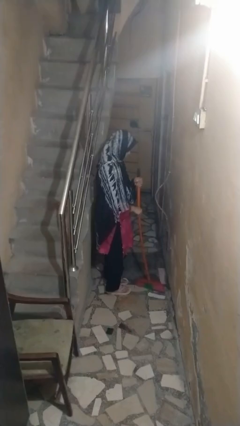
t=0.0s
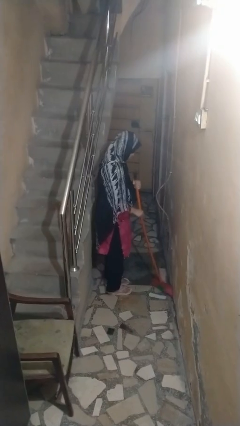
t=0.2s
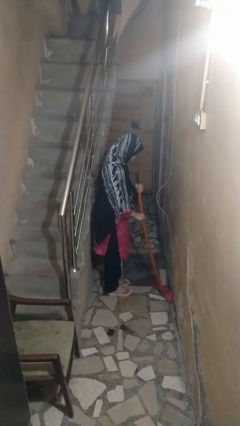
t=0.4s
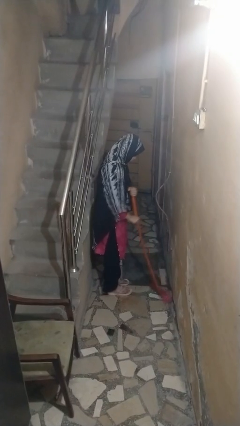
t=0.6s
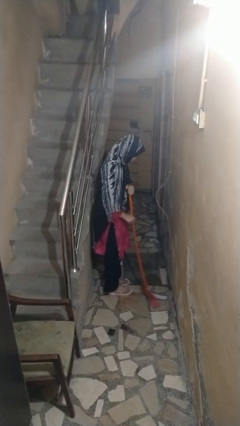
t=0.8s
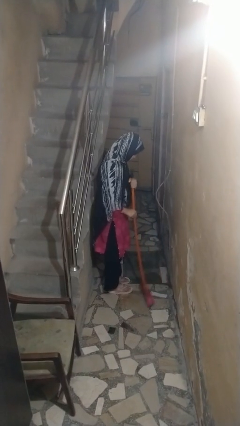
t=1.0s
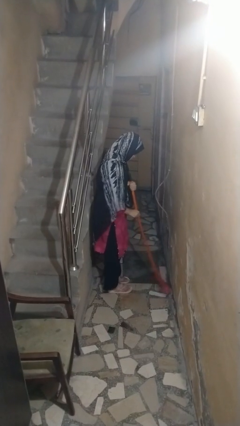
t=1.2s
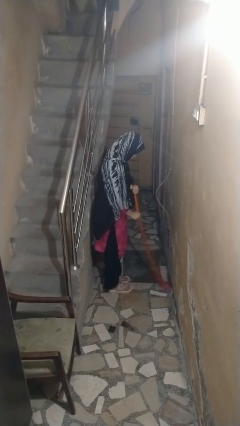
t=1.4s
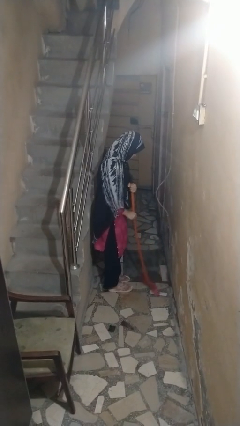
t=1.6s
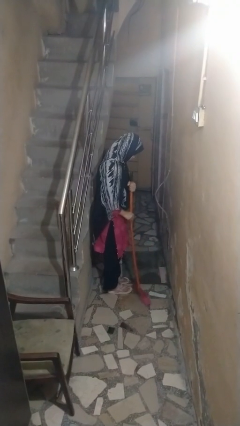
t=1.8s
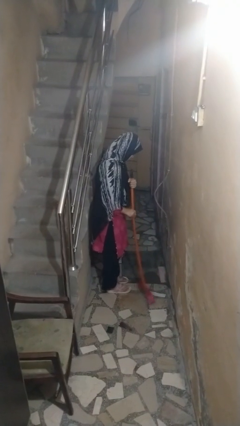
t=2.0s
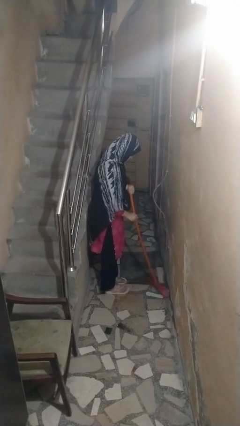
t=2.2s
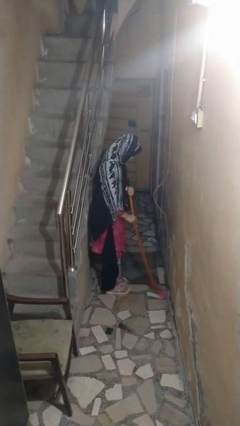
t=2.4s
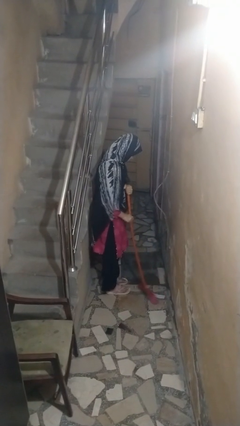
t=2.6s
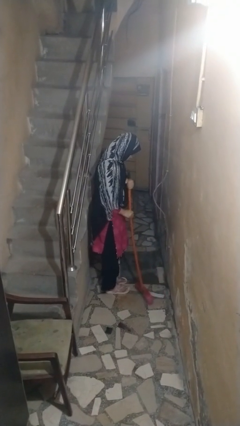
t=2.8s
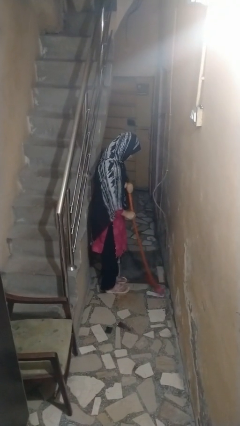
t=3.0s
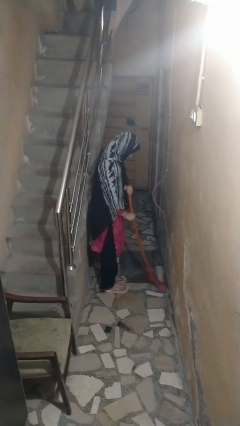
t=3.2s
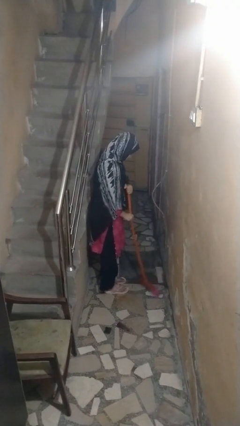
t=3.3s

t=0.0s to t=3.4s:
person sweeps floor

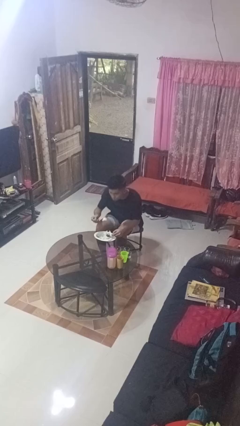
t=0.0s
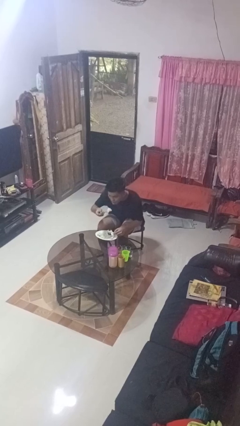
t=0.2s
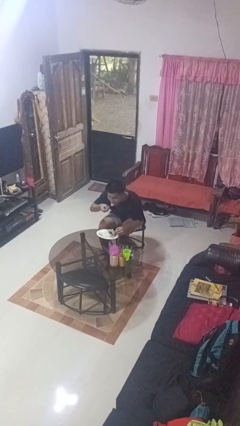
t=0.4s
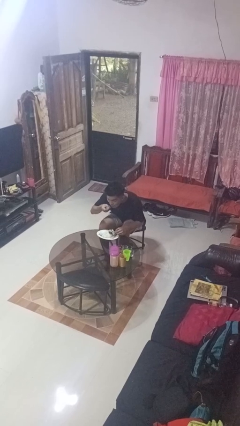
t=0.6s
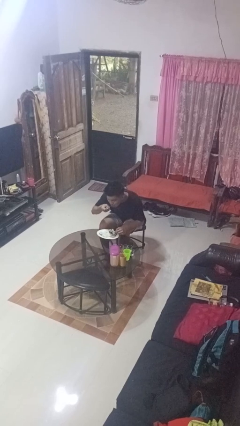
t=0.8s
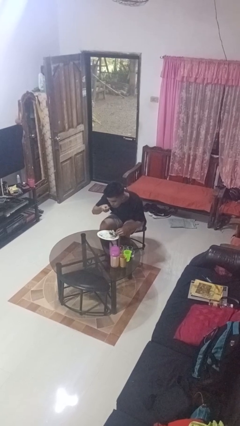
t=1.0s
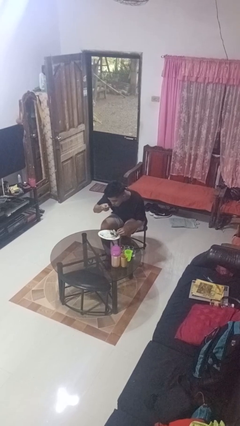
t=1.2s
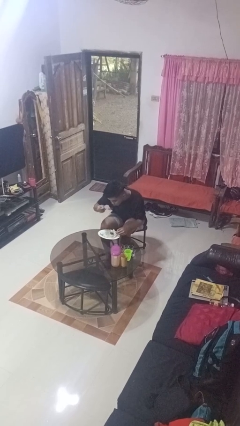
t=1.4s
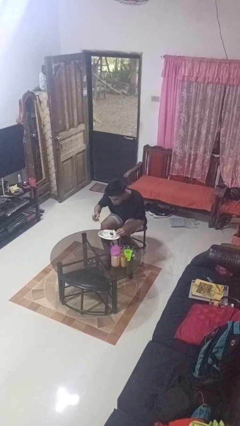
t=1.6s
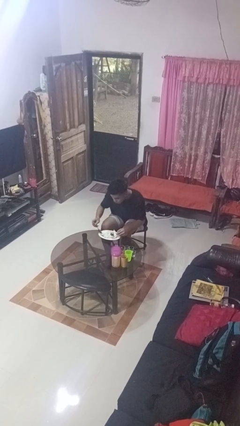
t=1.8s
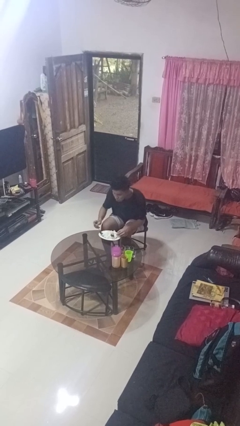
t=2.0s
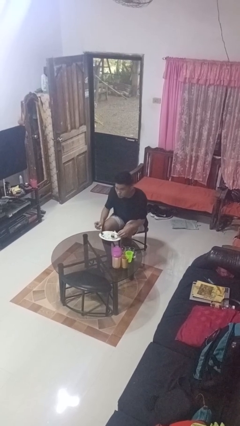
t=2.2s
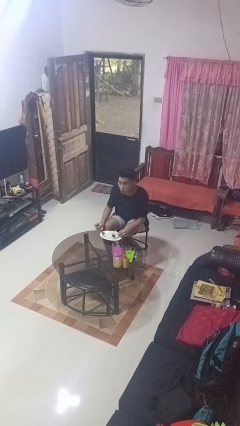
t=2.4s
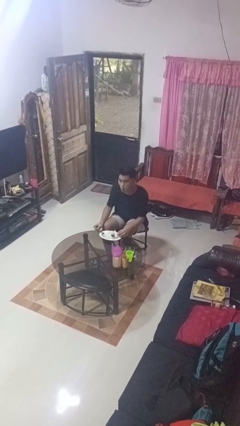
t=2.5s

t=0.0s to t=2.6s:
person eats with utensil

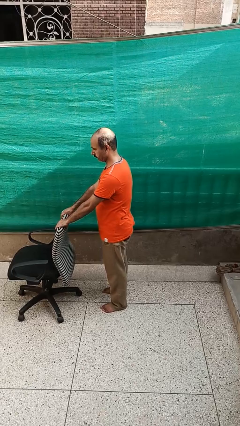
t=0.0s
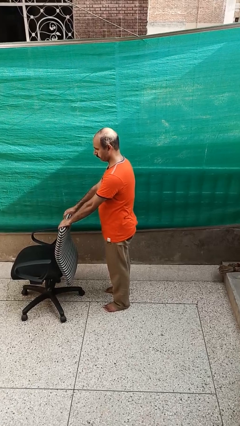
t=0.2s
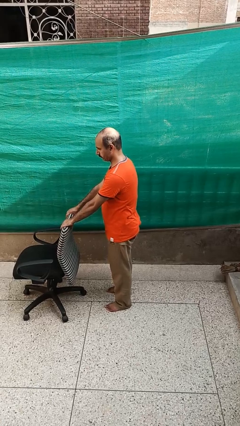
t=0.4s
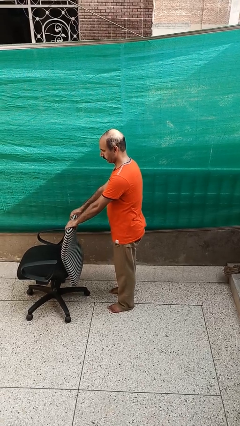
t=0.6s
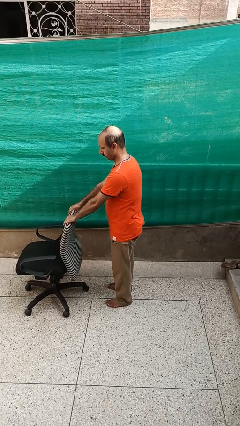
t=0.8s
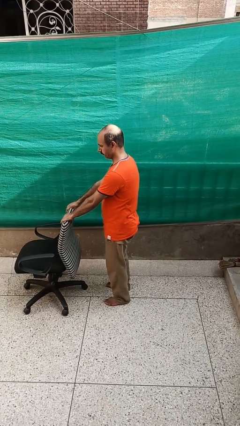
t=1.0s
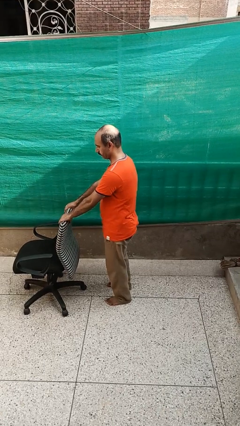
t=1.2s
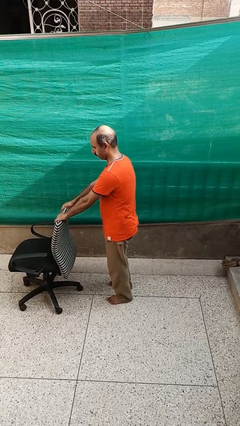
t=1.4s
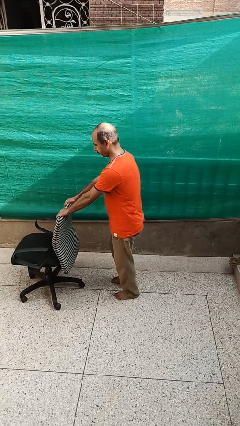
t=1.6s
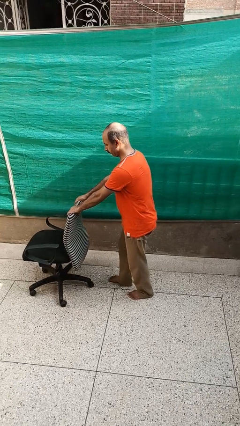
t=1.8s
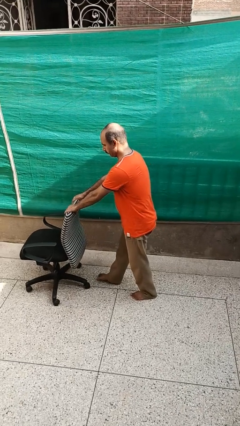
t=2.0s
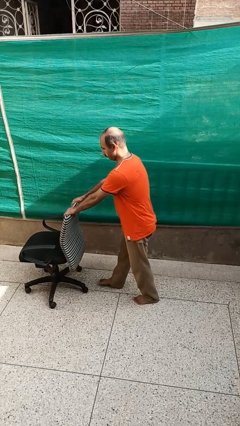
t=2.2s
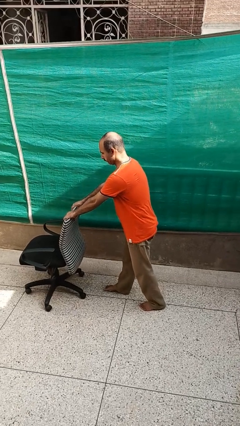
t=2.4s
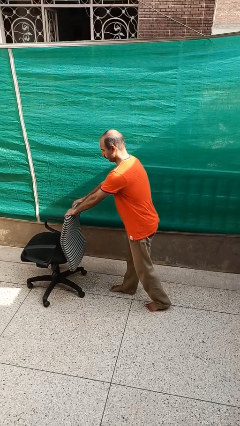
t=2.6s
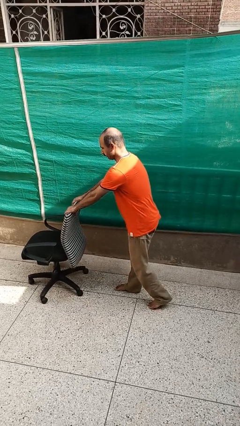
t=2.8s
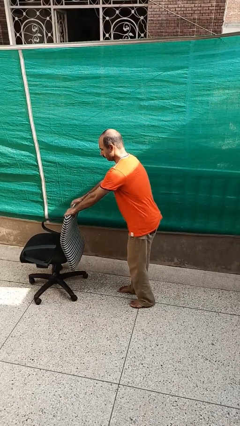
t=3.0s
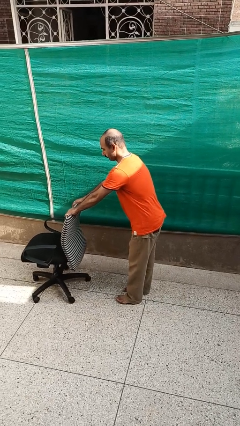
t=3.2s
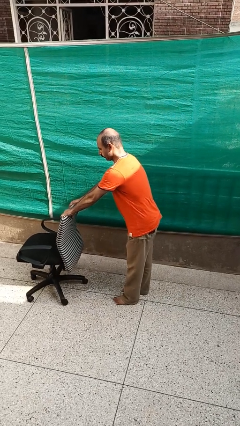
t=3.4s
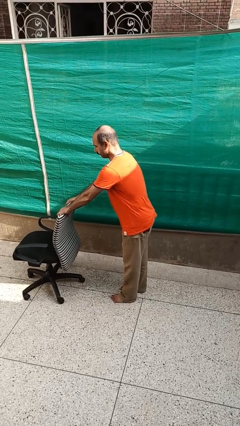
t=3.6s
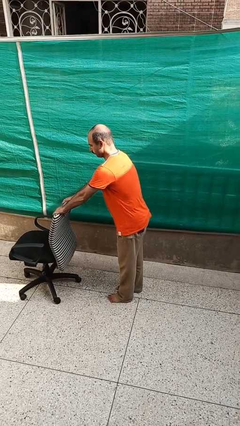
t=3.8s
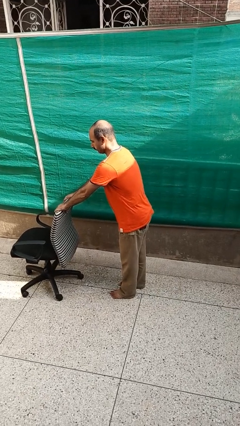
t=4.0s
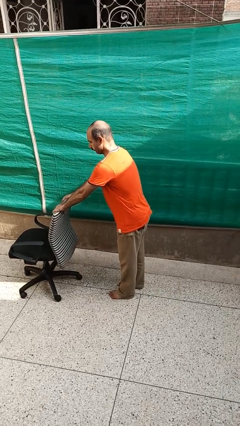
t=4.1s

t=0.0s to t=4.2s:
person pushes wheeled cart

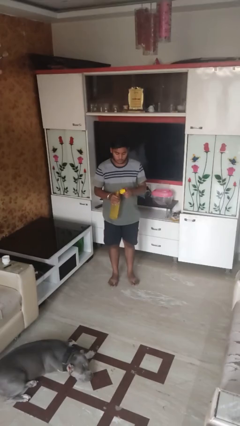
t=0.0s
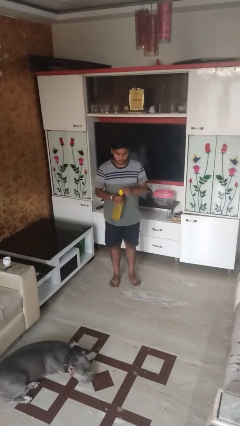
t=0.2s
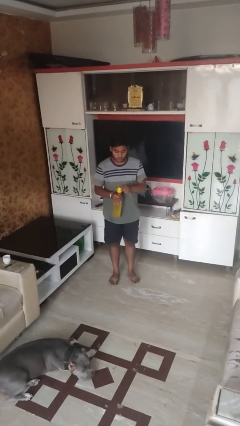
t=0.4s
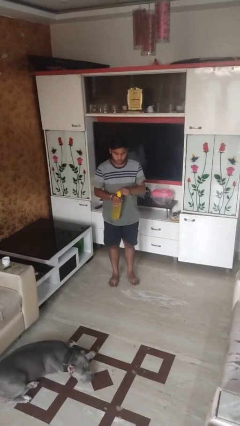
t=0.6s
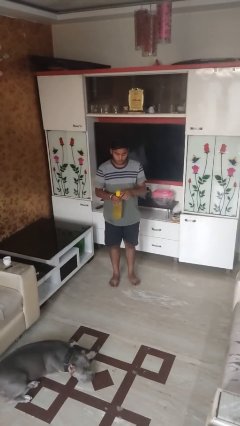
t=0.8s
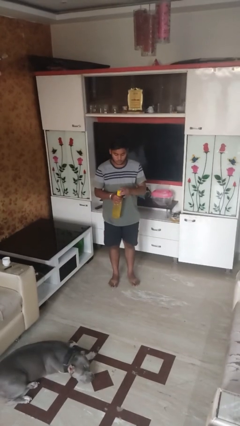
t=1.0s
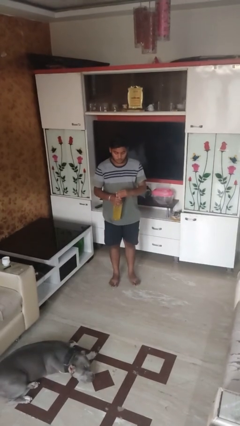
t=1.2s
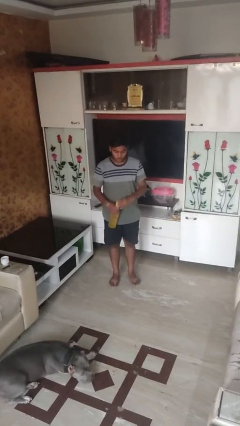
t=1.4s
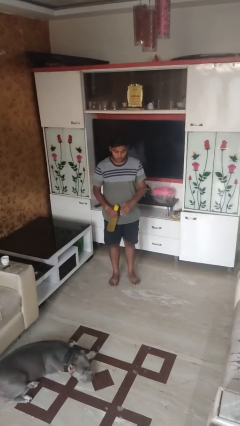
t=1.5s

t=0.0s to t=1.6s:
person screws lid to bottle

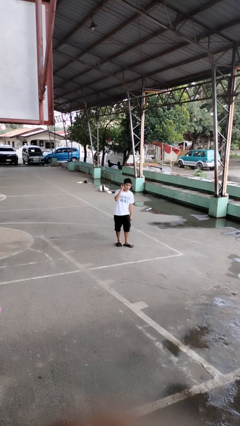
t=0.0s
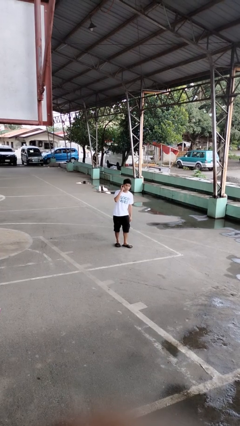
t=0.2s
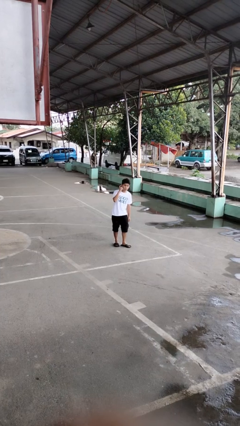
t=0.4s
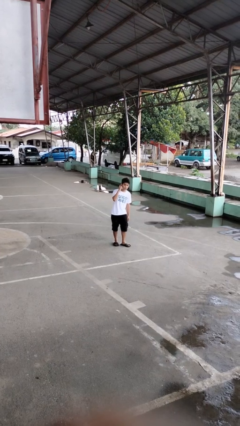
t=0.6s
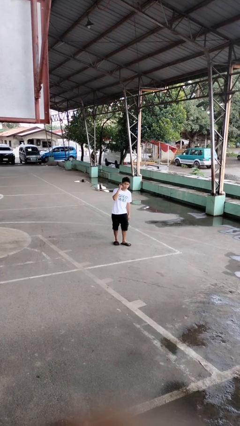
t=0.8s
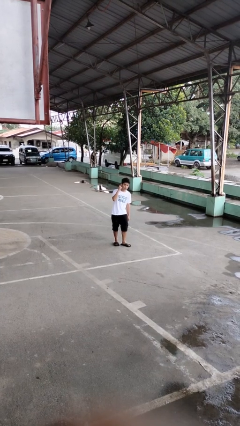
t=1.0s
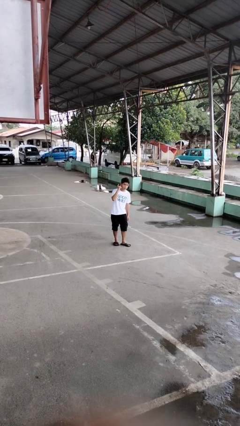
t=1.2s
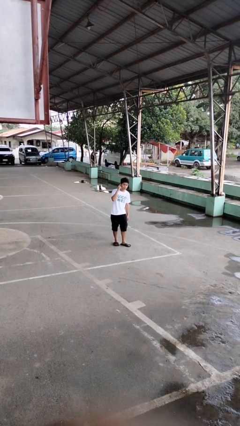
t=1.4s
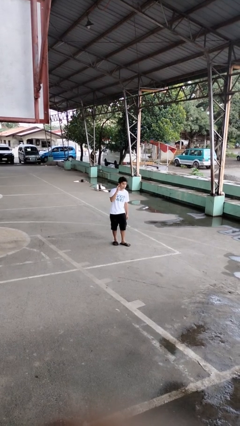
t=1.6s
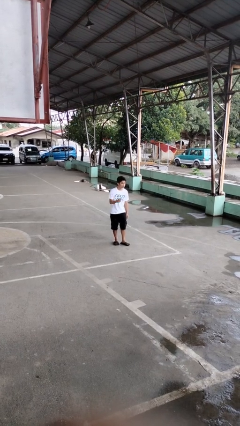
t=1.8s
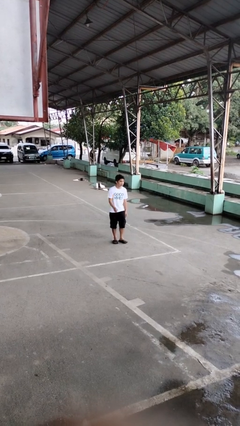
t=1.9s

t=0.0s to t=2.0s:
person gestures listen closely

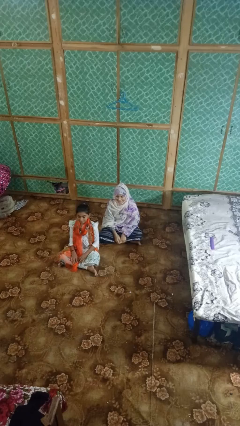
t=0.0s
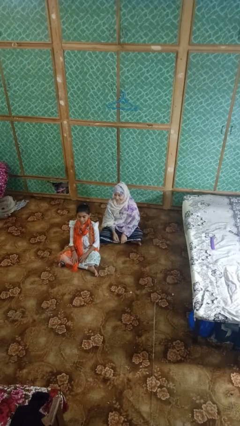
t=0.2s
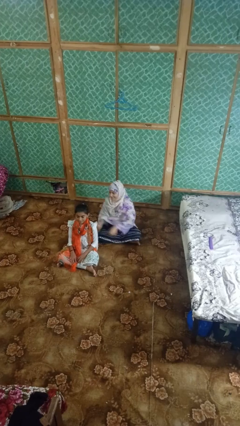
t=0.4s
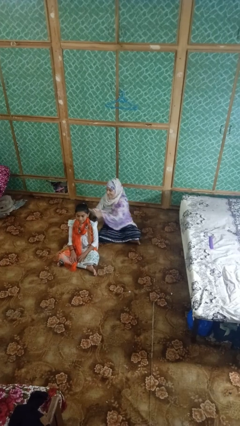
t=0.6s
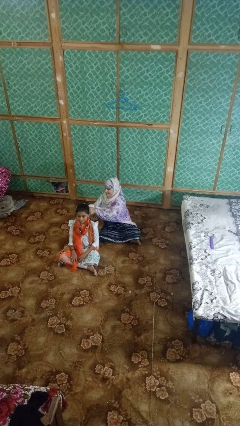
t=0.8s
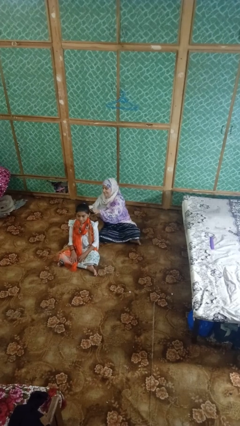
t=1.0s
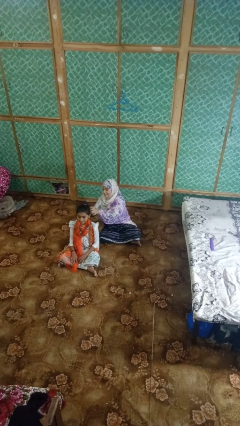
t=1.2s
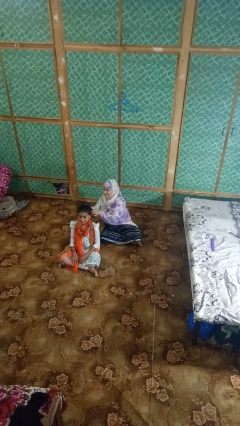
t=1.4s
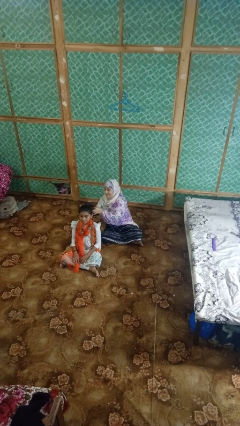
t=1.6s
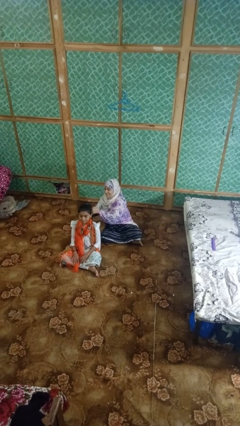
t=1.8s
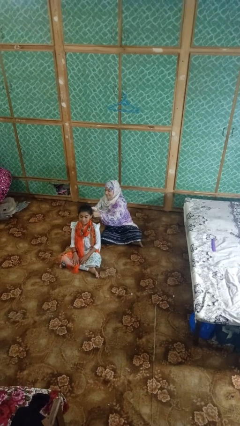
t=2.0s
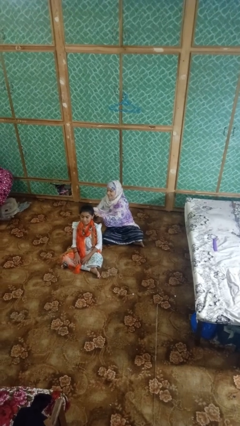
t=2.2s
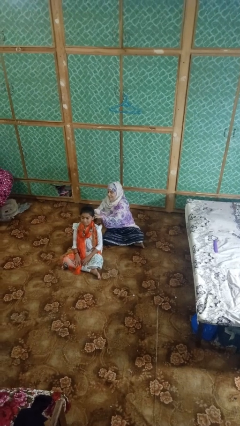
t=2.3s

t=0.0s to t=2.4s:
person braids hair of person

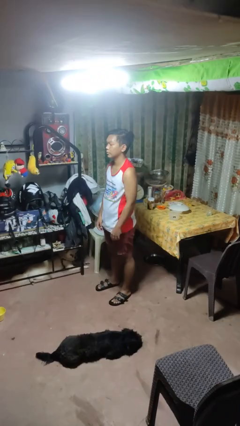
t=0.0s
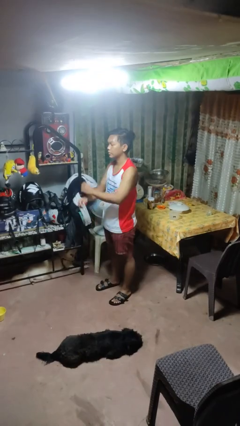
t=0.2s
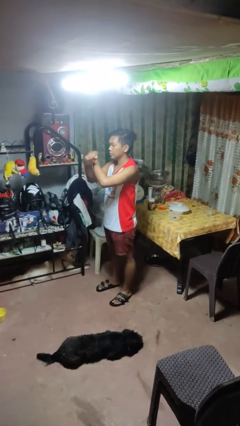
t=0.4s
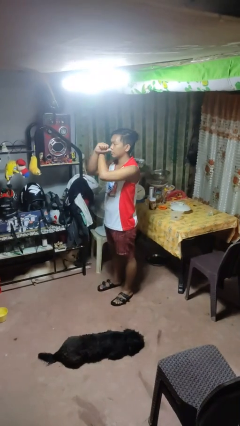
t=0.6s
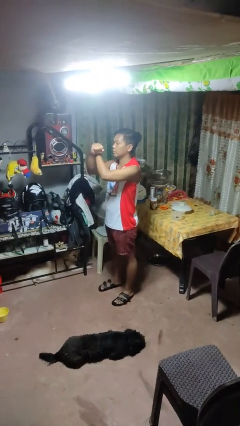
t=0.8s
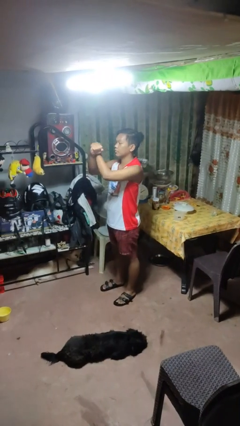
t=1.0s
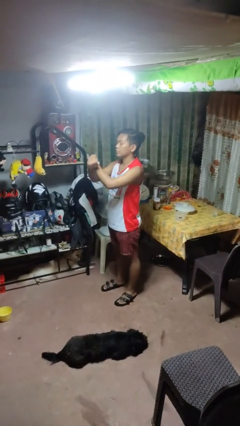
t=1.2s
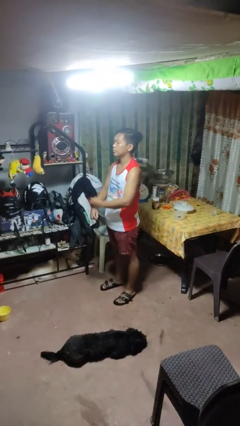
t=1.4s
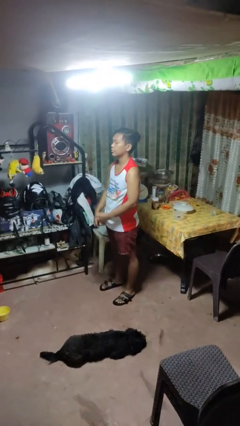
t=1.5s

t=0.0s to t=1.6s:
person gestures arms x
